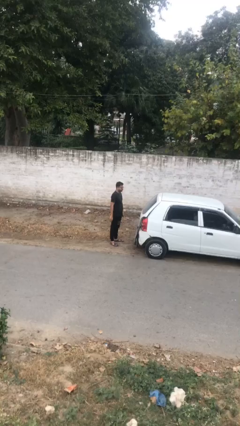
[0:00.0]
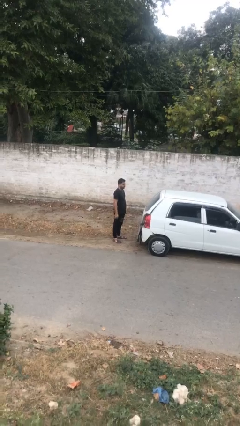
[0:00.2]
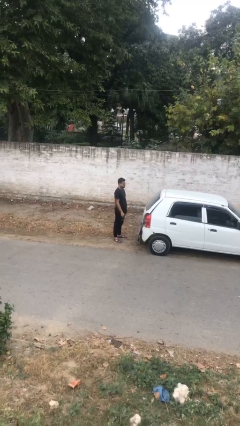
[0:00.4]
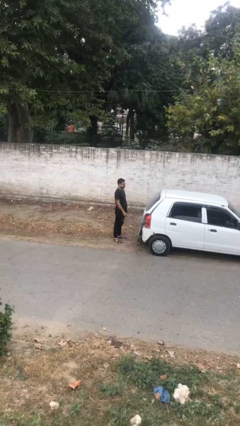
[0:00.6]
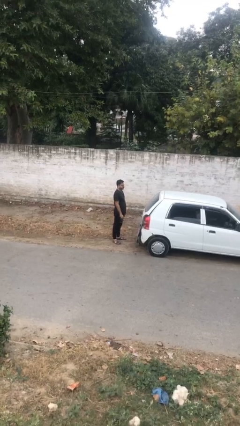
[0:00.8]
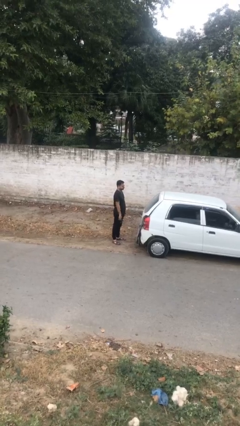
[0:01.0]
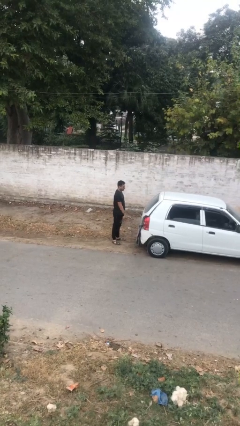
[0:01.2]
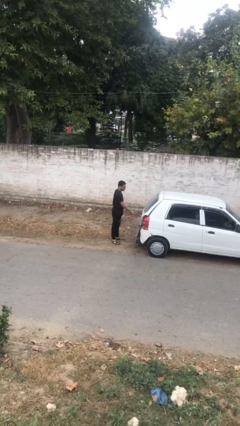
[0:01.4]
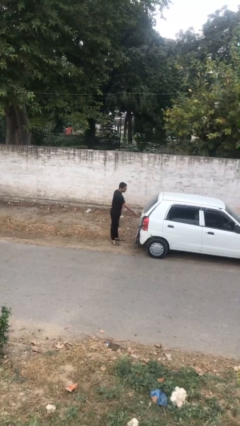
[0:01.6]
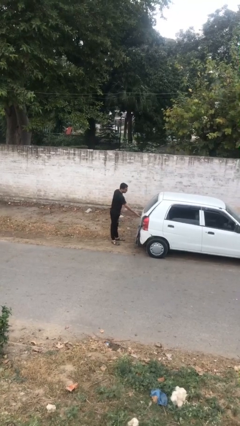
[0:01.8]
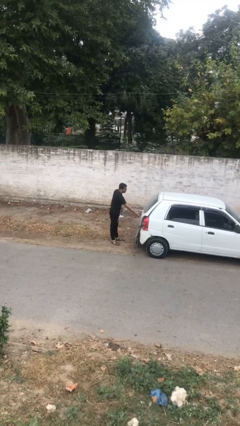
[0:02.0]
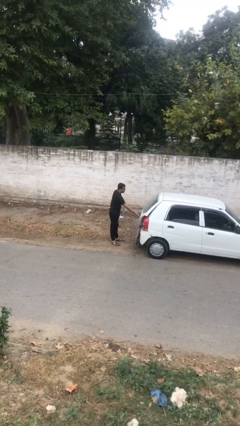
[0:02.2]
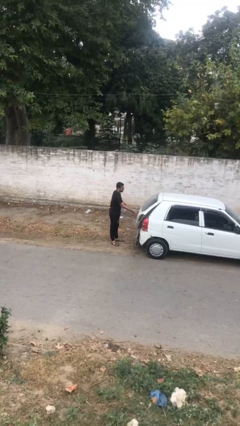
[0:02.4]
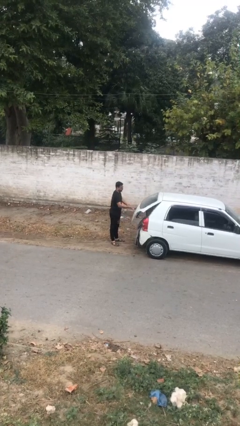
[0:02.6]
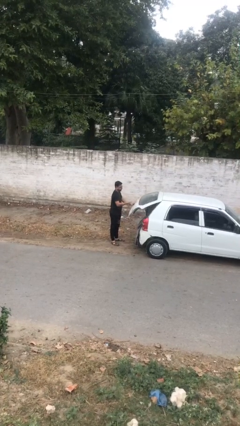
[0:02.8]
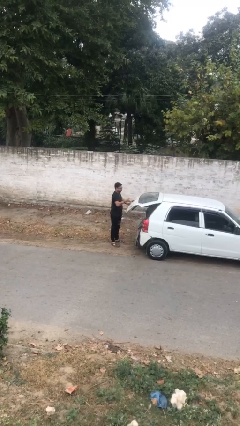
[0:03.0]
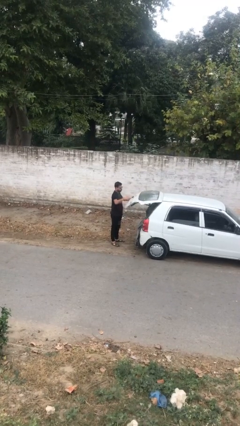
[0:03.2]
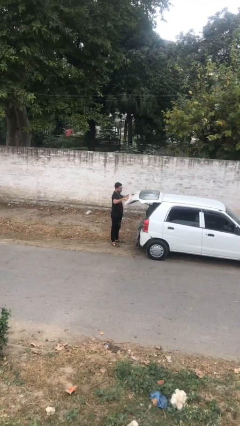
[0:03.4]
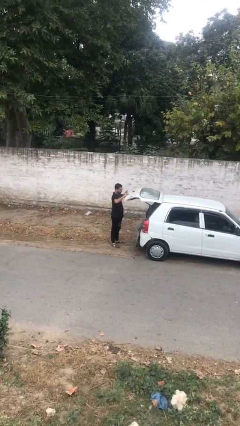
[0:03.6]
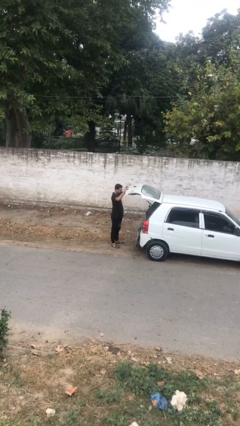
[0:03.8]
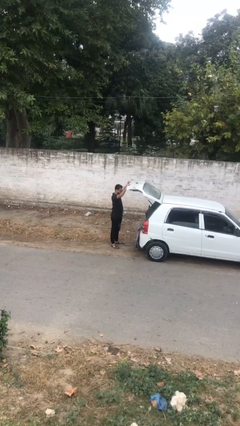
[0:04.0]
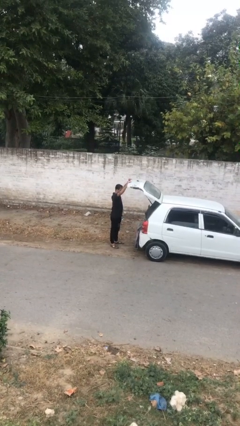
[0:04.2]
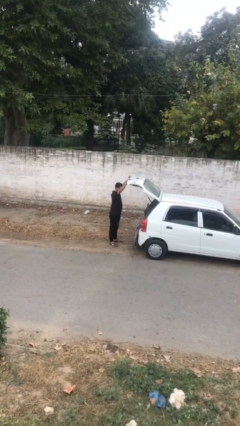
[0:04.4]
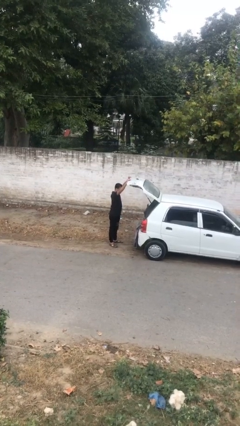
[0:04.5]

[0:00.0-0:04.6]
person opens car trunk

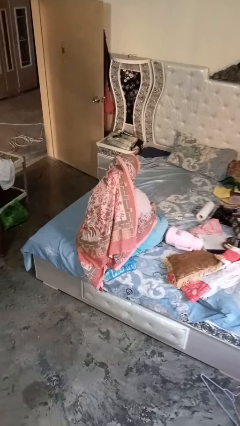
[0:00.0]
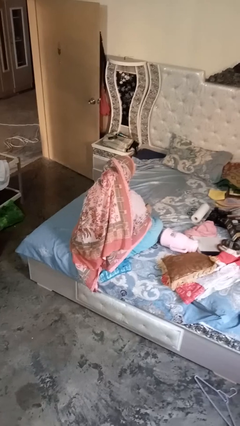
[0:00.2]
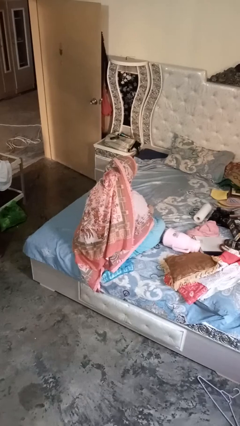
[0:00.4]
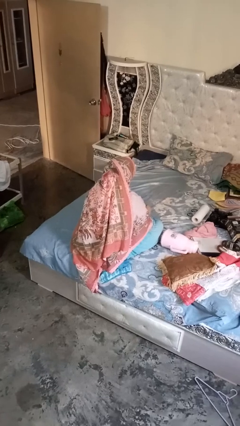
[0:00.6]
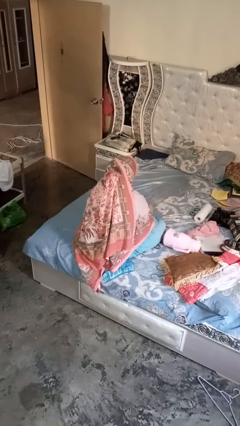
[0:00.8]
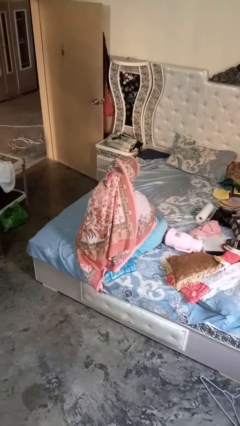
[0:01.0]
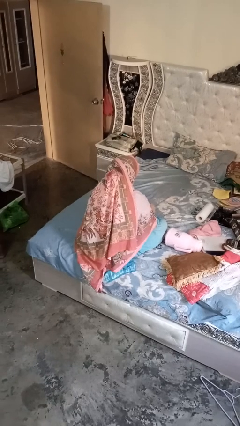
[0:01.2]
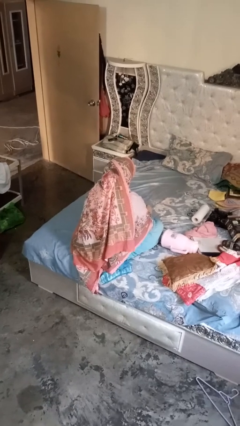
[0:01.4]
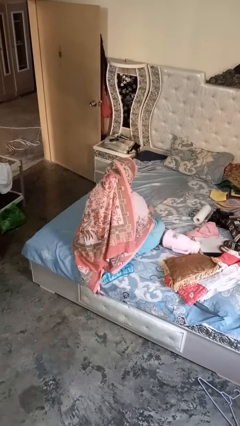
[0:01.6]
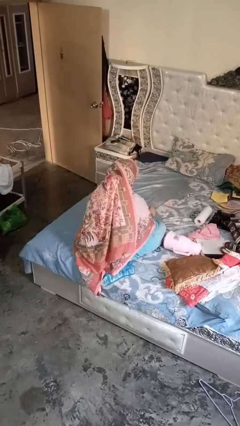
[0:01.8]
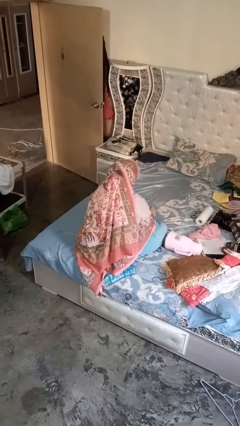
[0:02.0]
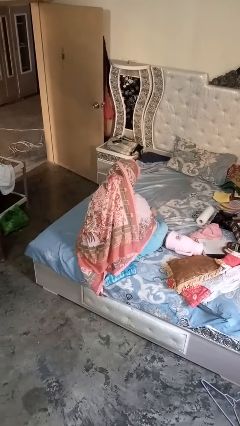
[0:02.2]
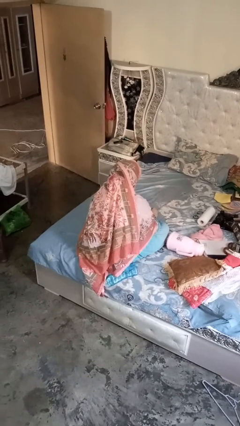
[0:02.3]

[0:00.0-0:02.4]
person stirs mug

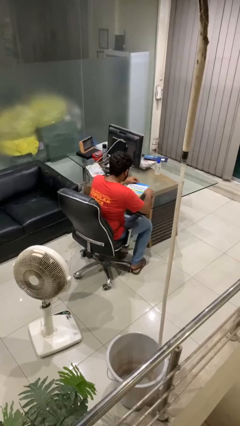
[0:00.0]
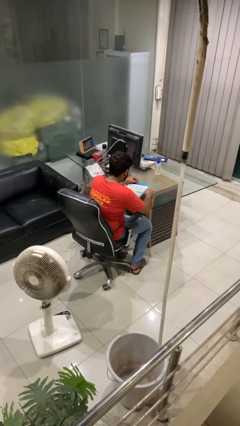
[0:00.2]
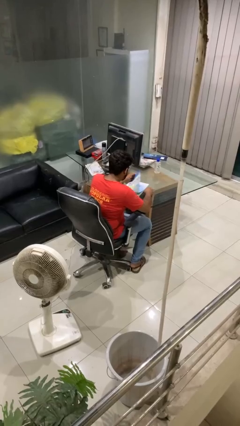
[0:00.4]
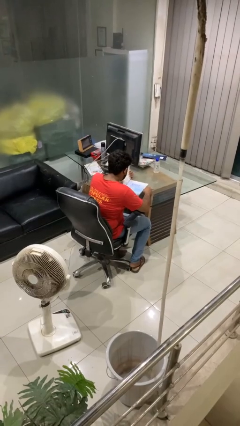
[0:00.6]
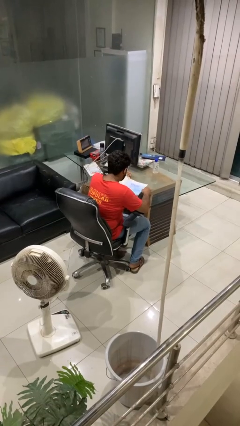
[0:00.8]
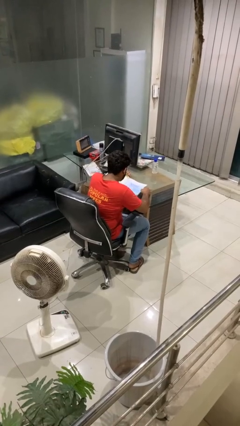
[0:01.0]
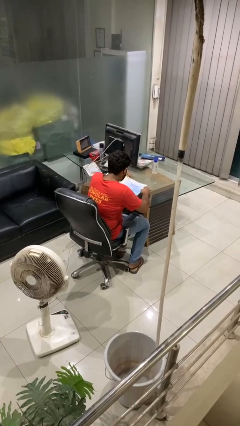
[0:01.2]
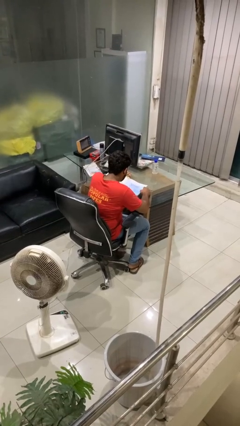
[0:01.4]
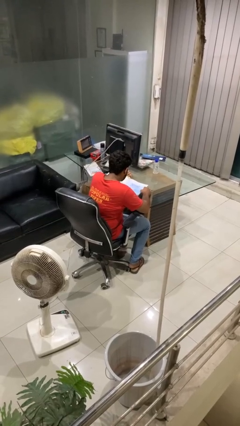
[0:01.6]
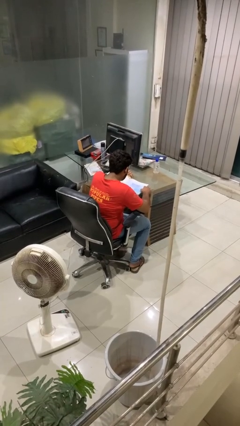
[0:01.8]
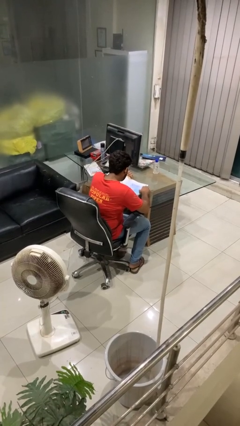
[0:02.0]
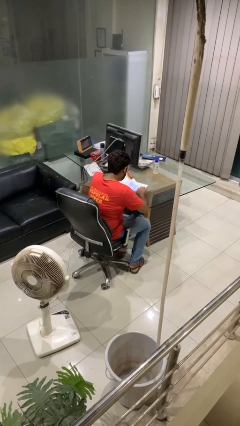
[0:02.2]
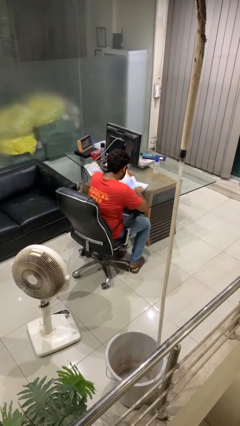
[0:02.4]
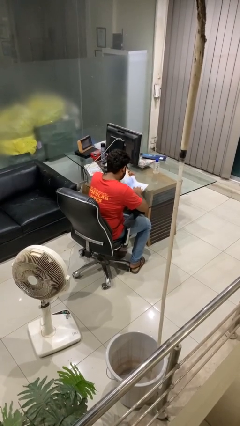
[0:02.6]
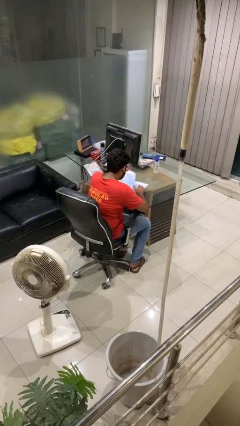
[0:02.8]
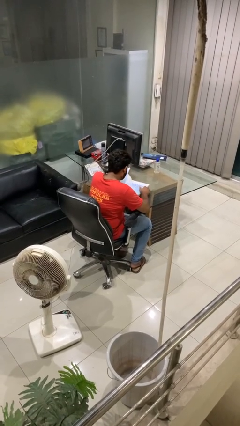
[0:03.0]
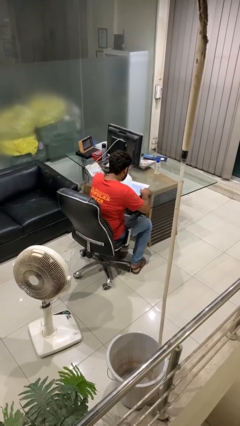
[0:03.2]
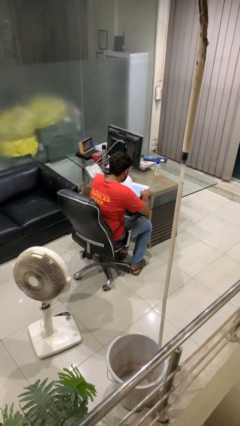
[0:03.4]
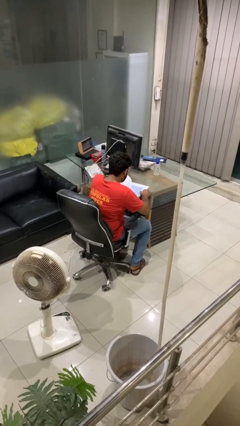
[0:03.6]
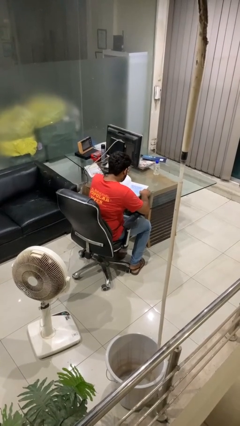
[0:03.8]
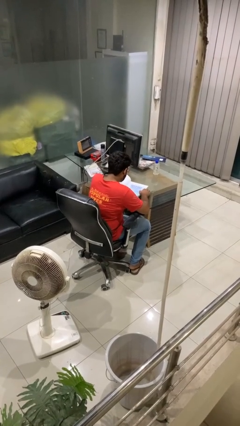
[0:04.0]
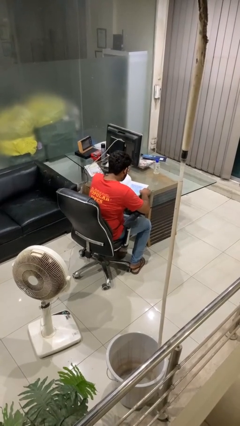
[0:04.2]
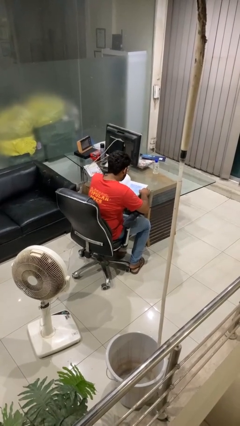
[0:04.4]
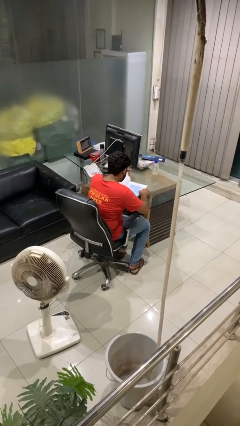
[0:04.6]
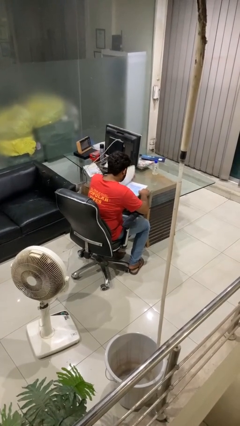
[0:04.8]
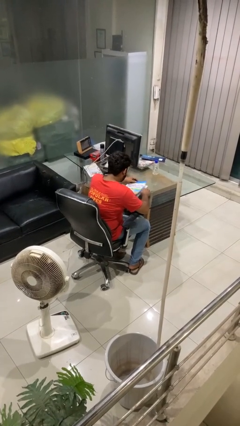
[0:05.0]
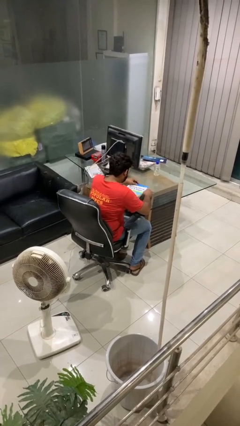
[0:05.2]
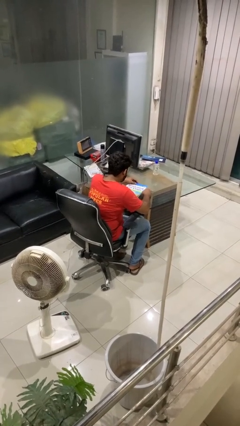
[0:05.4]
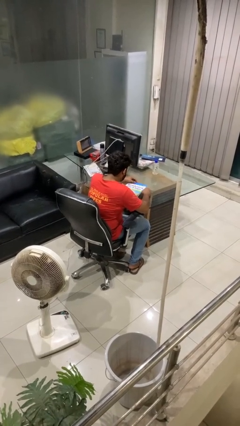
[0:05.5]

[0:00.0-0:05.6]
person reads book

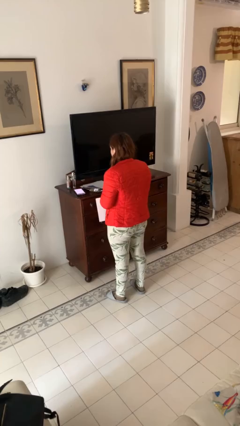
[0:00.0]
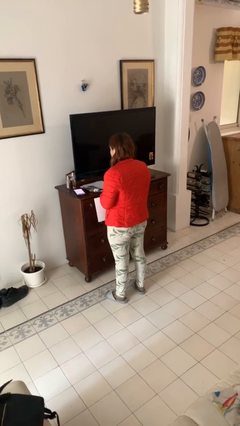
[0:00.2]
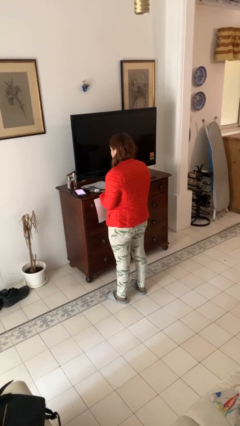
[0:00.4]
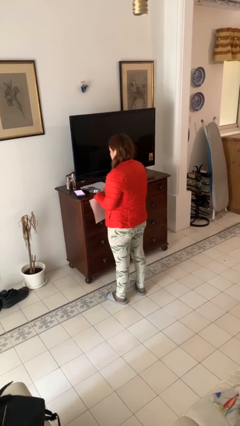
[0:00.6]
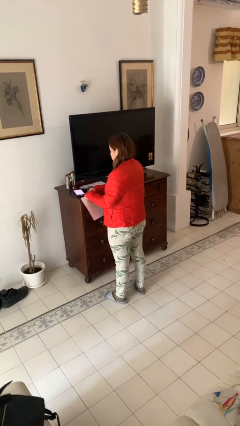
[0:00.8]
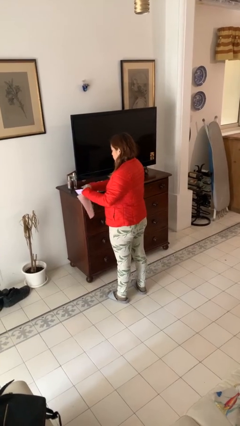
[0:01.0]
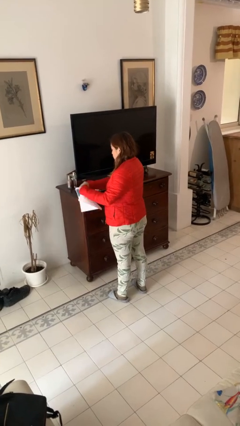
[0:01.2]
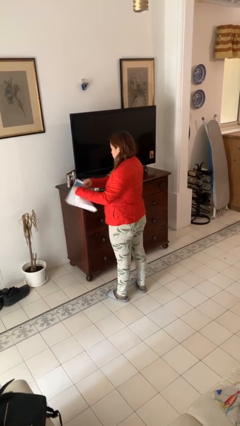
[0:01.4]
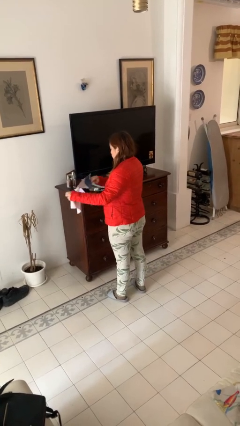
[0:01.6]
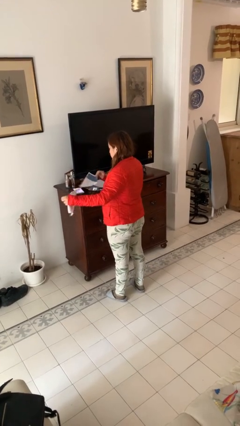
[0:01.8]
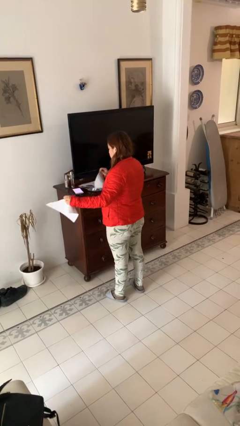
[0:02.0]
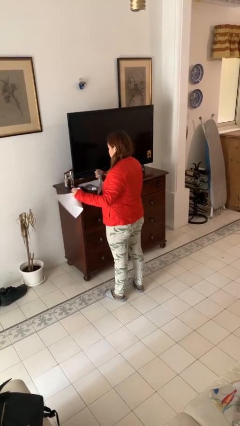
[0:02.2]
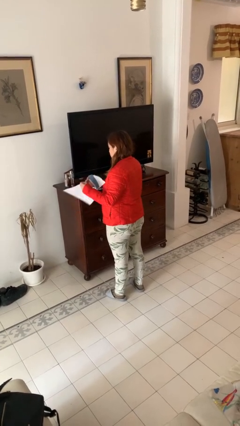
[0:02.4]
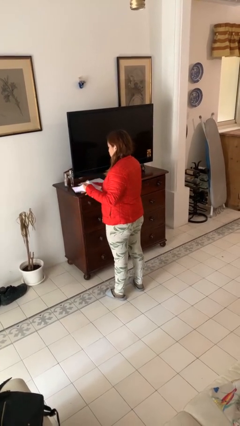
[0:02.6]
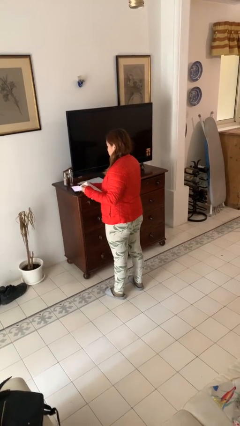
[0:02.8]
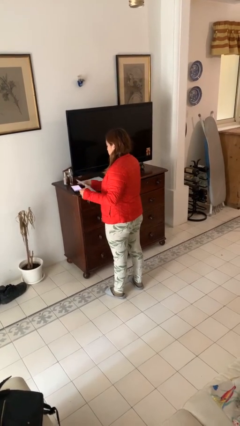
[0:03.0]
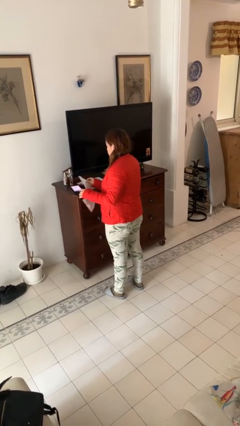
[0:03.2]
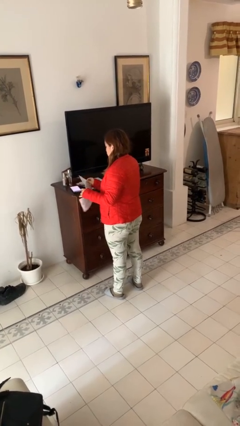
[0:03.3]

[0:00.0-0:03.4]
person tears paper

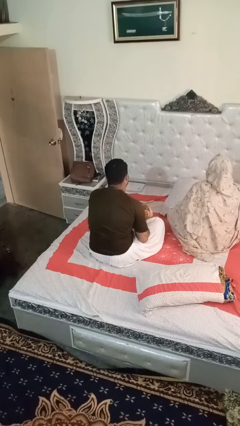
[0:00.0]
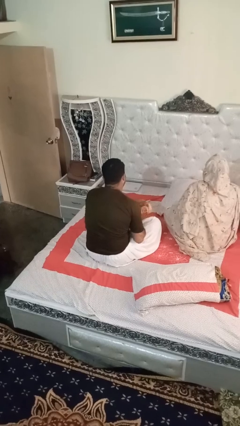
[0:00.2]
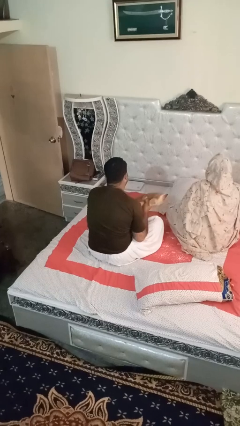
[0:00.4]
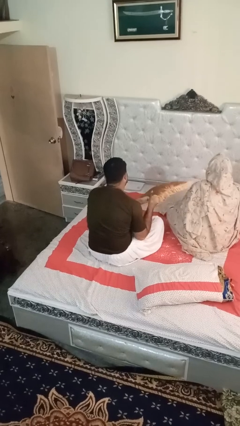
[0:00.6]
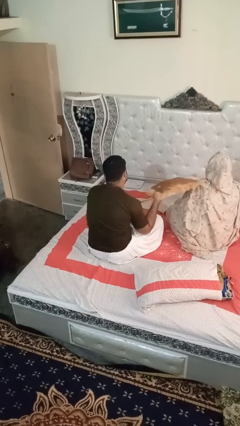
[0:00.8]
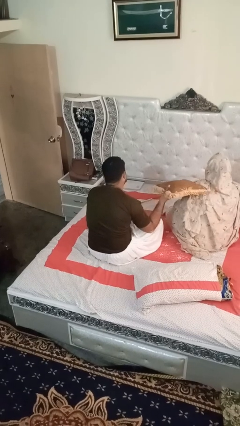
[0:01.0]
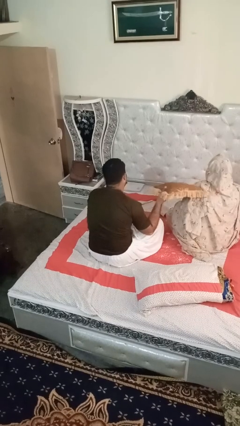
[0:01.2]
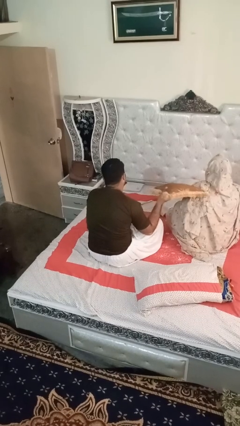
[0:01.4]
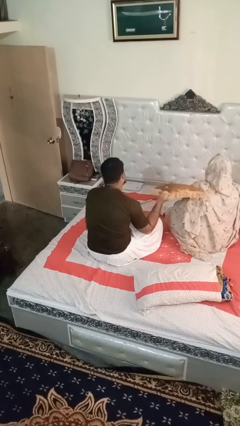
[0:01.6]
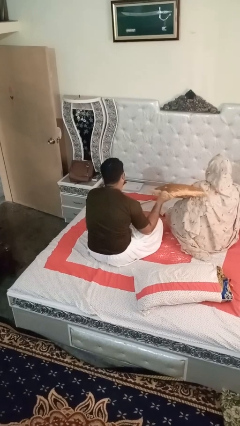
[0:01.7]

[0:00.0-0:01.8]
person hits person with pillow
